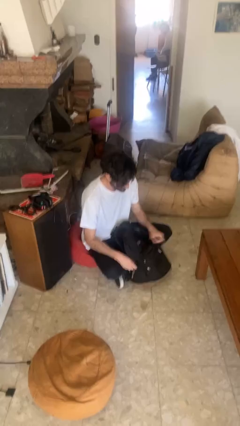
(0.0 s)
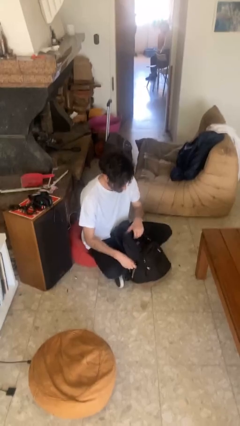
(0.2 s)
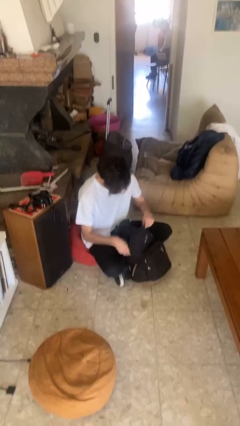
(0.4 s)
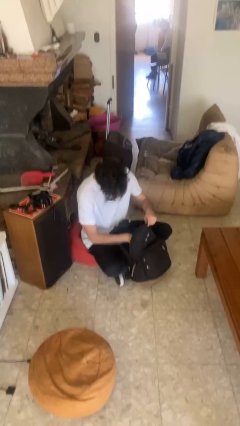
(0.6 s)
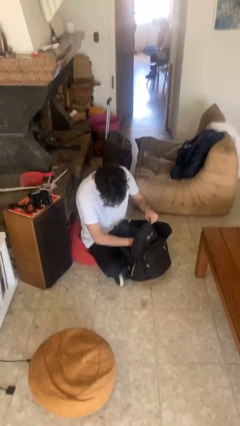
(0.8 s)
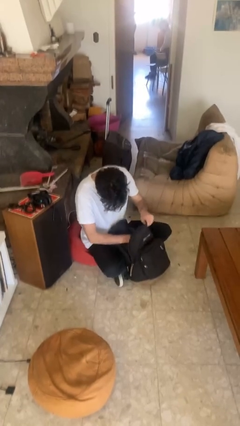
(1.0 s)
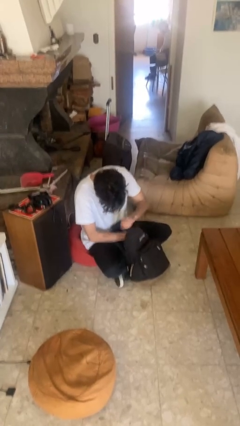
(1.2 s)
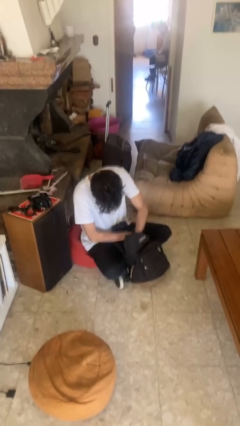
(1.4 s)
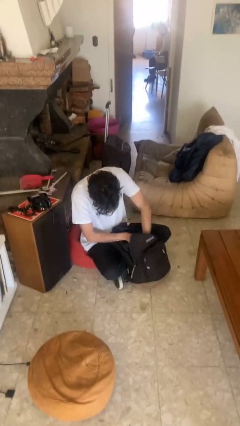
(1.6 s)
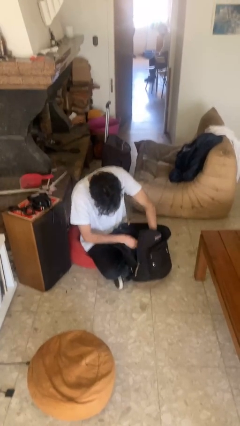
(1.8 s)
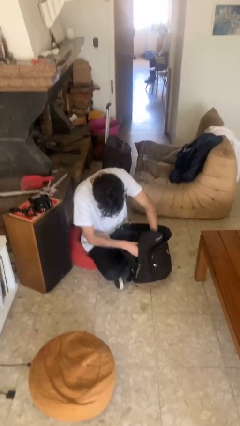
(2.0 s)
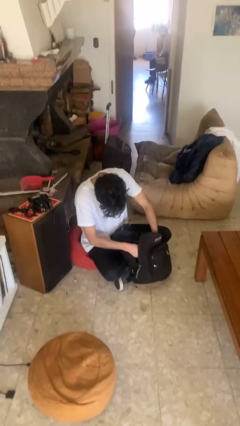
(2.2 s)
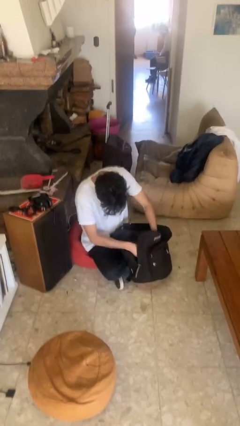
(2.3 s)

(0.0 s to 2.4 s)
person searches in backpack

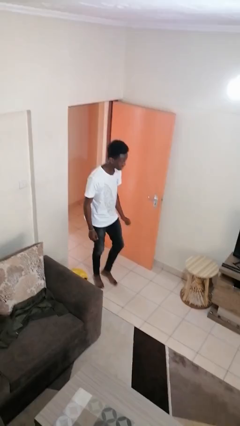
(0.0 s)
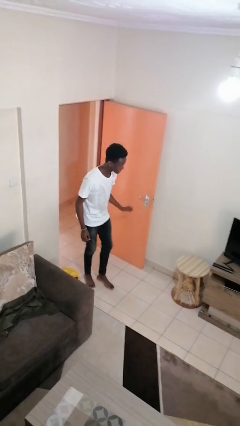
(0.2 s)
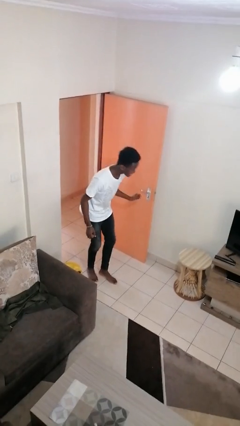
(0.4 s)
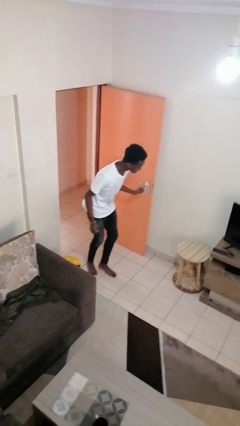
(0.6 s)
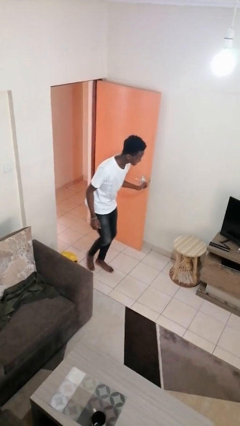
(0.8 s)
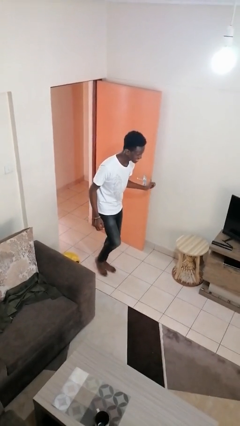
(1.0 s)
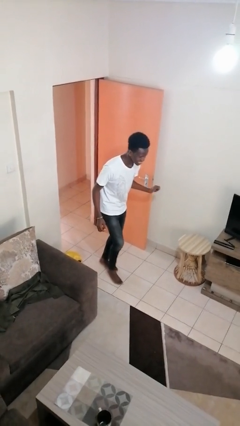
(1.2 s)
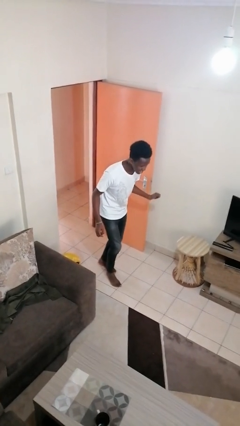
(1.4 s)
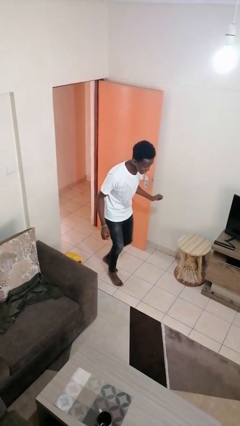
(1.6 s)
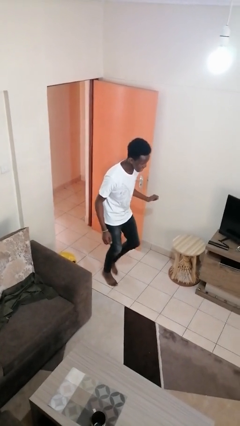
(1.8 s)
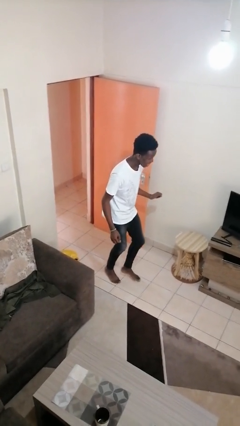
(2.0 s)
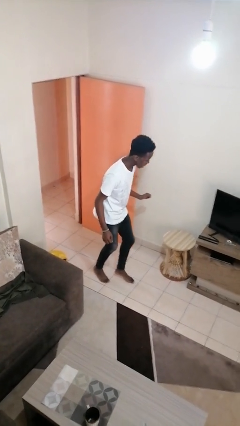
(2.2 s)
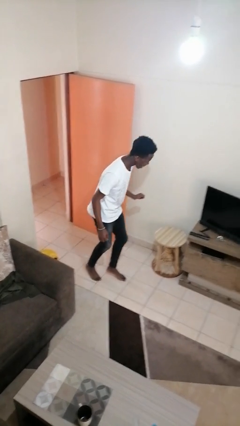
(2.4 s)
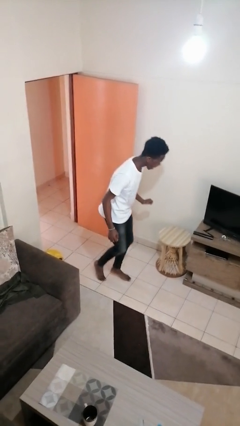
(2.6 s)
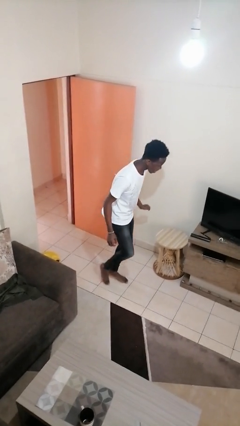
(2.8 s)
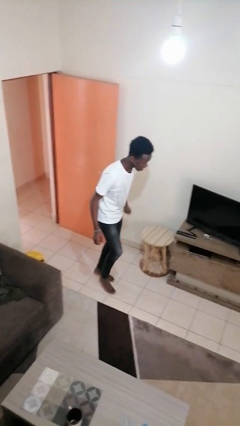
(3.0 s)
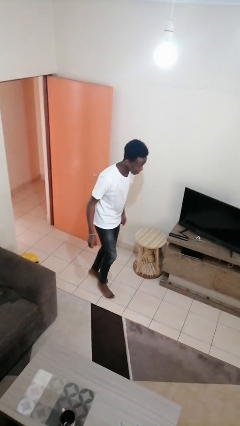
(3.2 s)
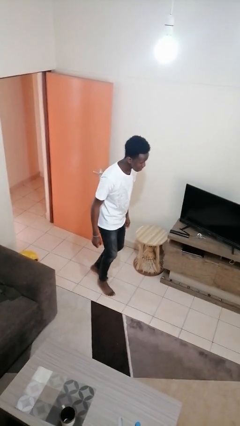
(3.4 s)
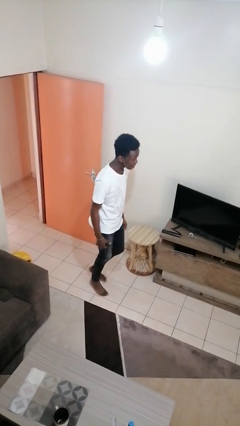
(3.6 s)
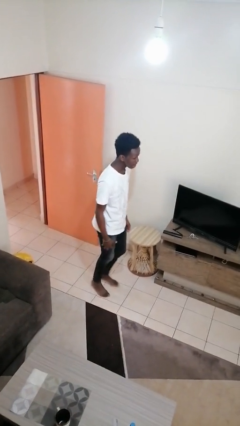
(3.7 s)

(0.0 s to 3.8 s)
person walks tiptoe

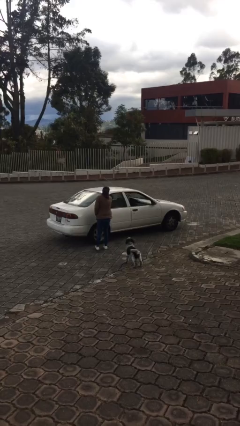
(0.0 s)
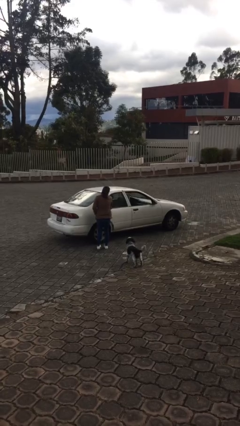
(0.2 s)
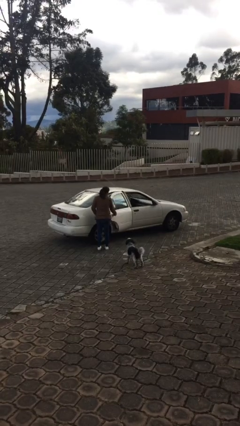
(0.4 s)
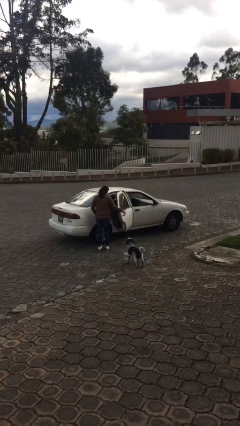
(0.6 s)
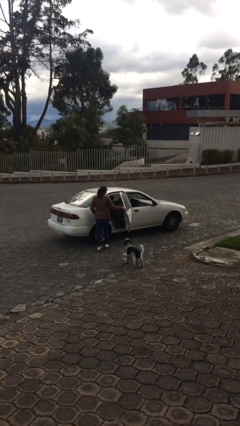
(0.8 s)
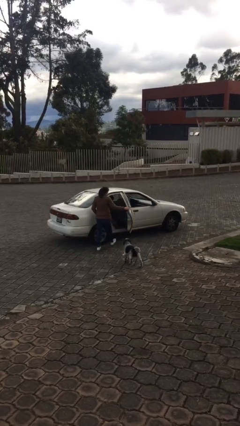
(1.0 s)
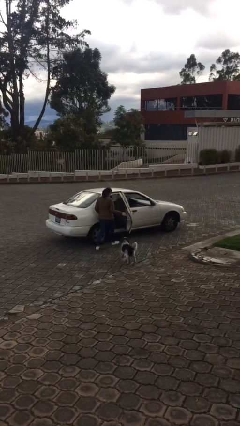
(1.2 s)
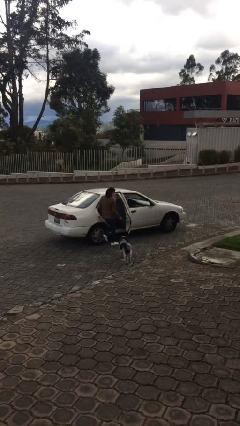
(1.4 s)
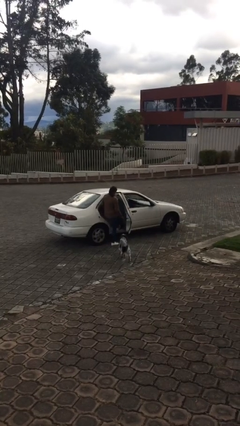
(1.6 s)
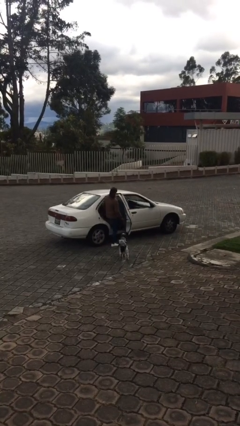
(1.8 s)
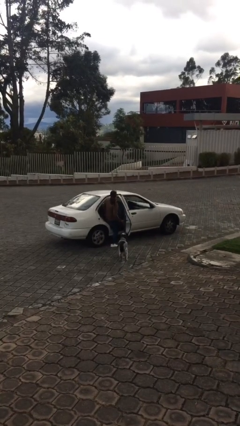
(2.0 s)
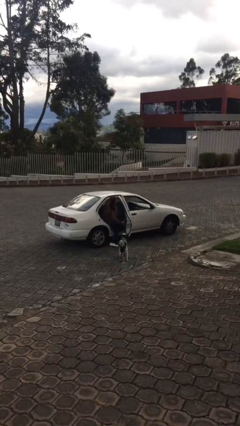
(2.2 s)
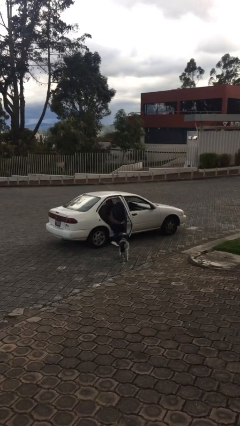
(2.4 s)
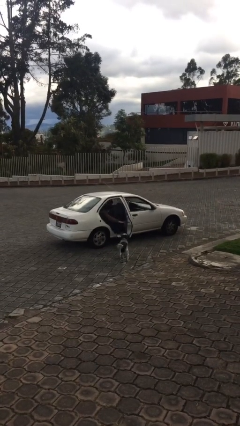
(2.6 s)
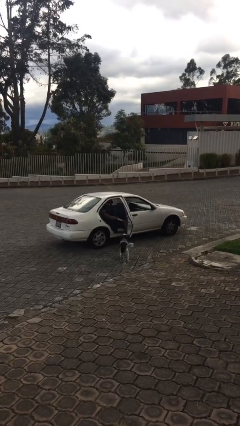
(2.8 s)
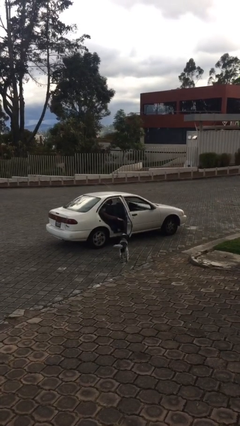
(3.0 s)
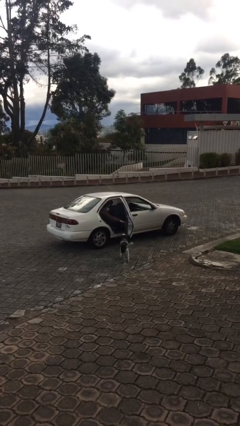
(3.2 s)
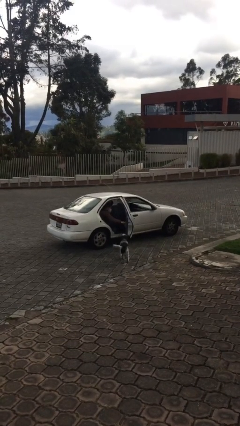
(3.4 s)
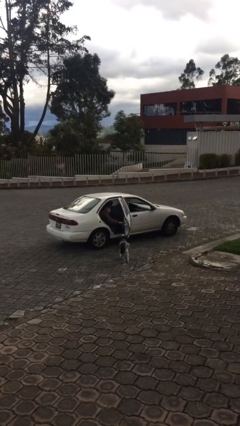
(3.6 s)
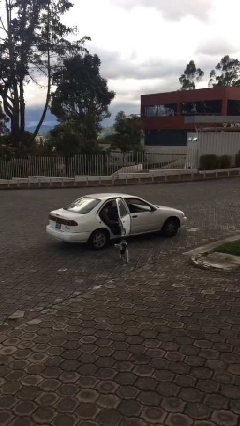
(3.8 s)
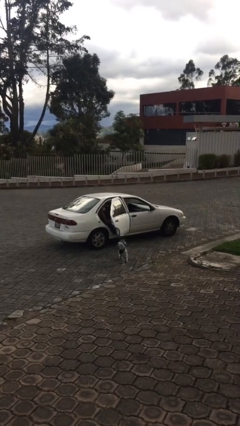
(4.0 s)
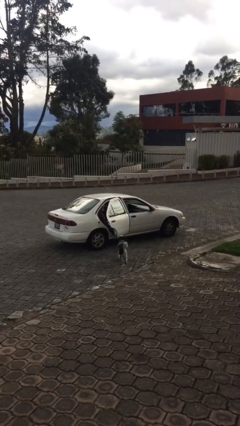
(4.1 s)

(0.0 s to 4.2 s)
car picks up person

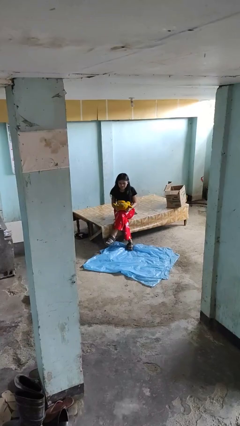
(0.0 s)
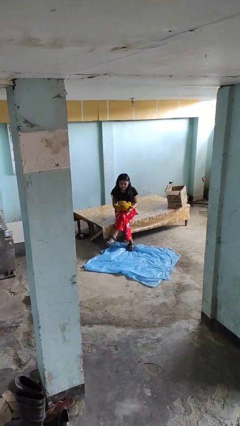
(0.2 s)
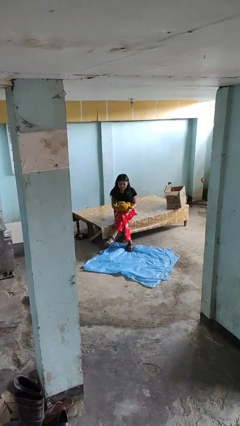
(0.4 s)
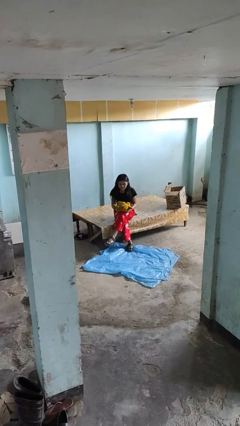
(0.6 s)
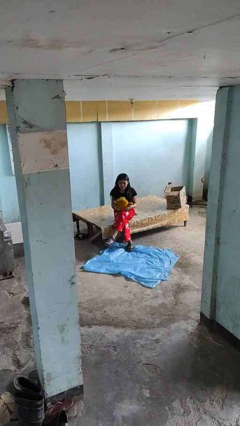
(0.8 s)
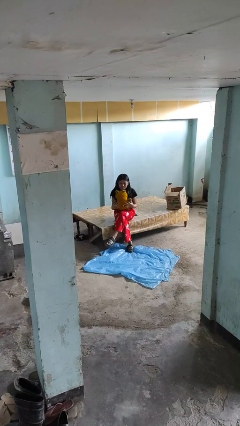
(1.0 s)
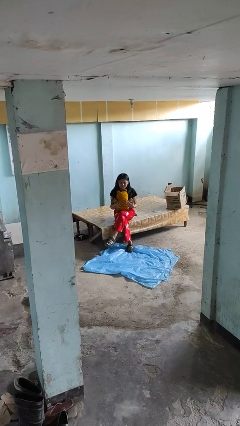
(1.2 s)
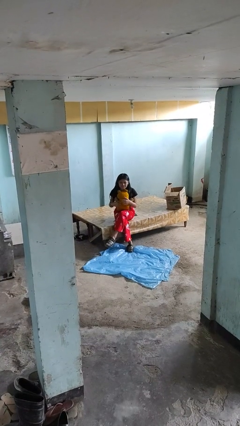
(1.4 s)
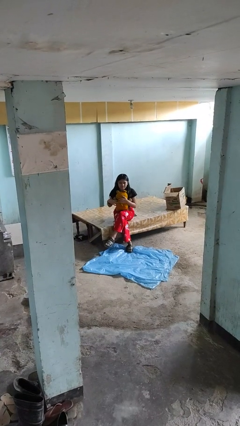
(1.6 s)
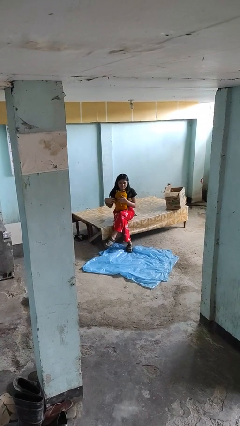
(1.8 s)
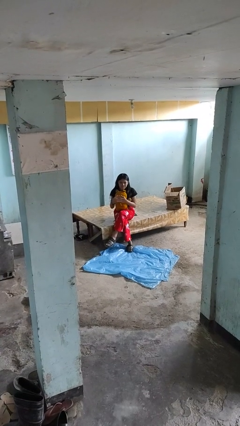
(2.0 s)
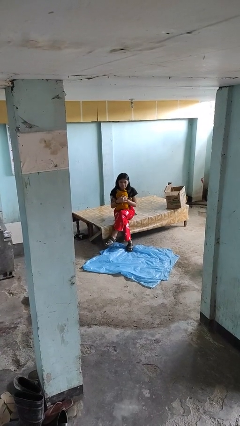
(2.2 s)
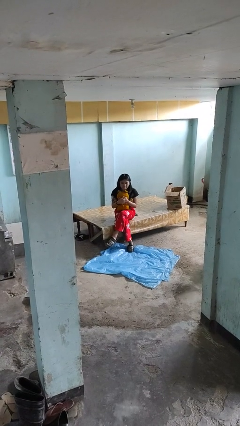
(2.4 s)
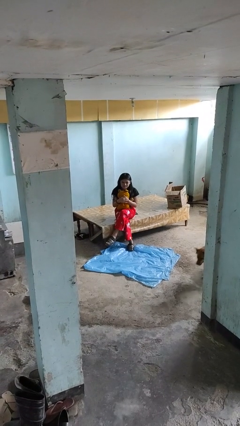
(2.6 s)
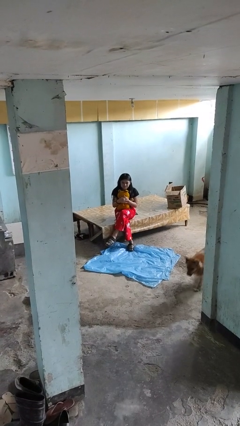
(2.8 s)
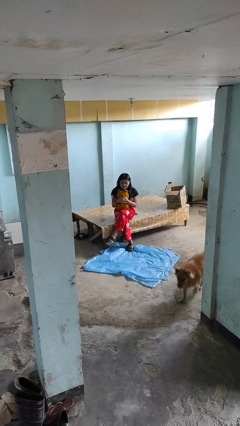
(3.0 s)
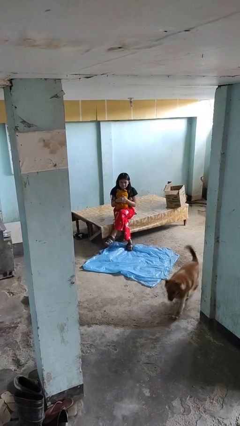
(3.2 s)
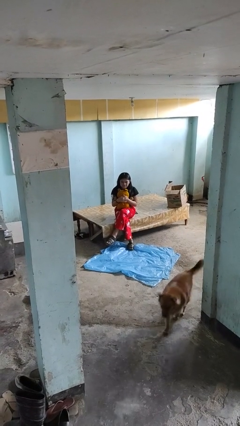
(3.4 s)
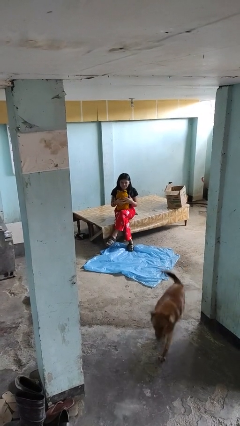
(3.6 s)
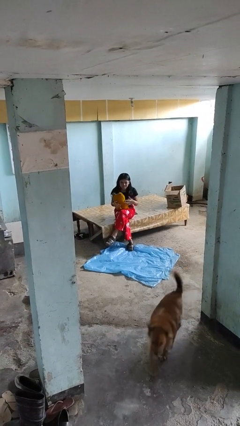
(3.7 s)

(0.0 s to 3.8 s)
person hugs stuffed animal

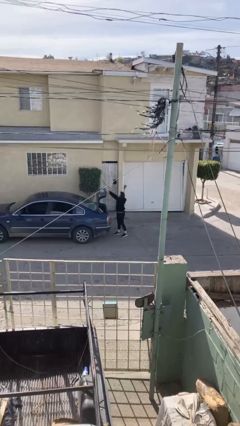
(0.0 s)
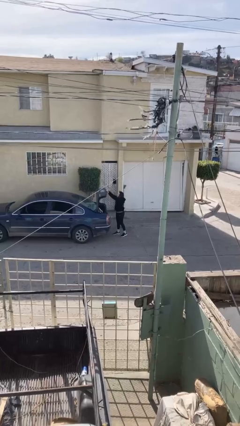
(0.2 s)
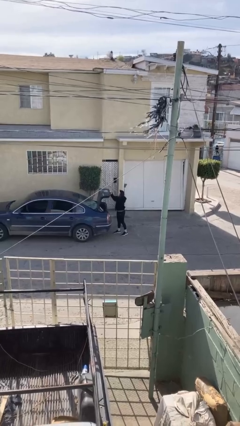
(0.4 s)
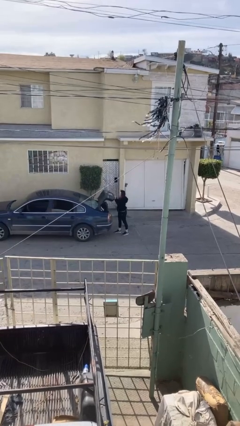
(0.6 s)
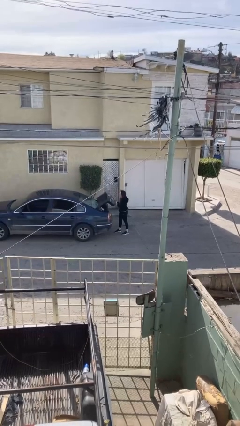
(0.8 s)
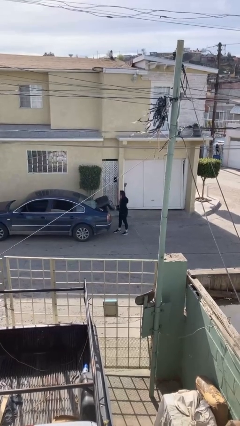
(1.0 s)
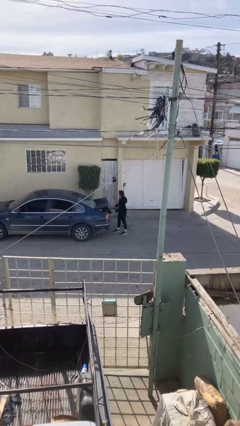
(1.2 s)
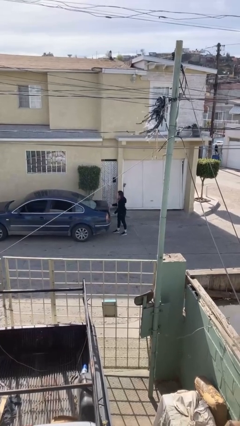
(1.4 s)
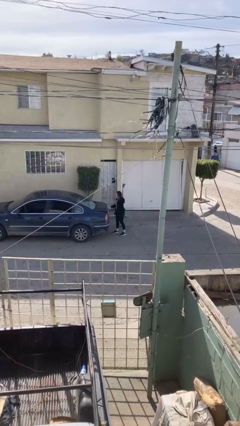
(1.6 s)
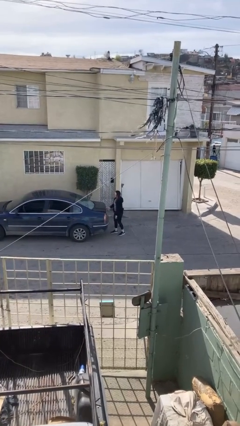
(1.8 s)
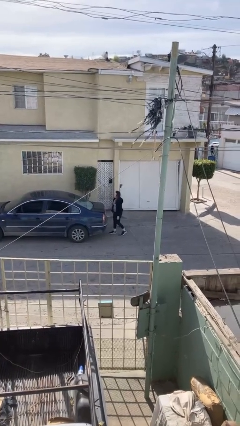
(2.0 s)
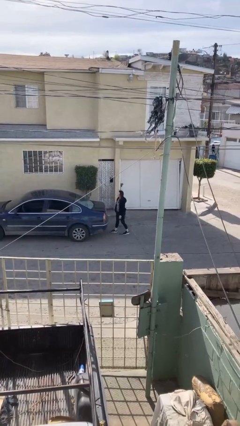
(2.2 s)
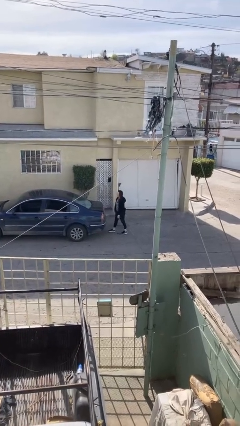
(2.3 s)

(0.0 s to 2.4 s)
person closes car trunk

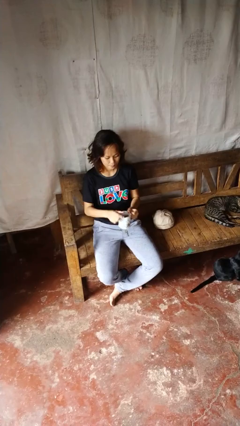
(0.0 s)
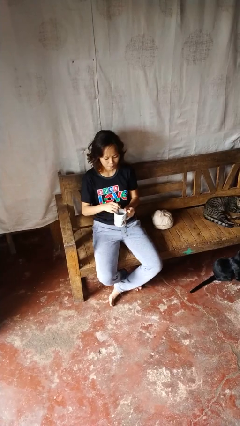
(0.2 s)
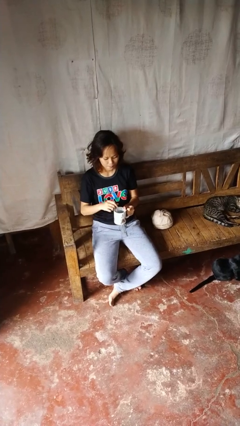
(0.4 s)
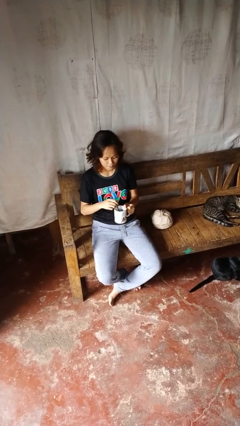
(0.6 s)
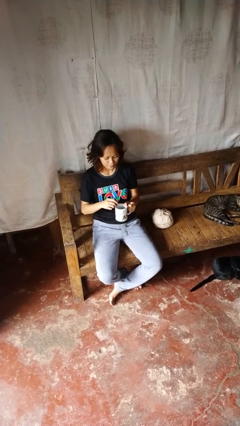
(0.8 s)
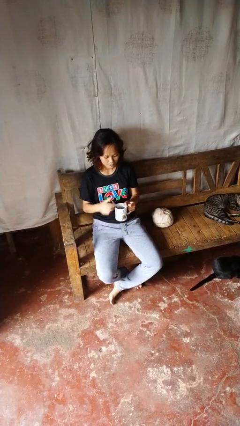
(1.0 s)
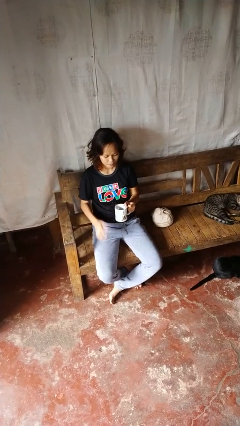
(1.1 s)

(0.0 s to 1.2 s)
person stirs mug
